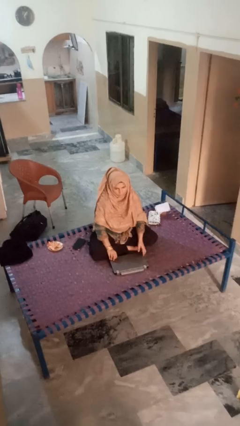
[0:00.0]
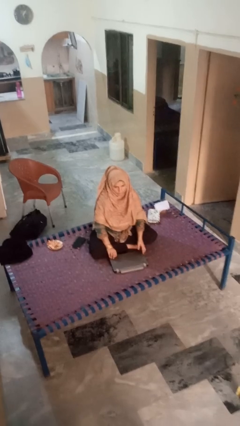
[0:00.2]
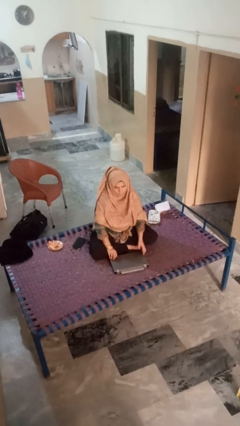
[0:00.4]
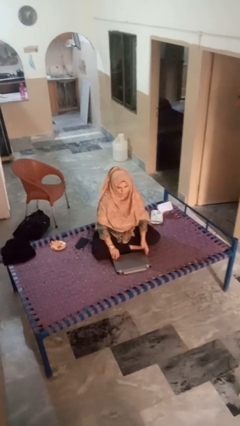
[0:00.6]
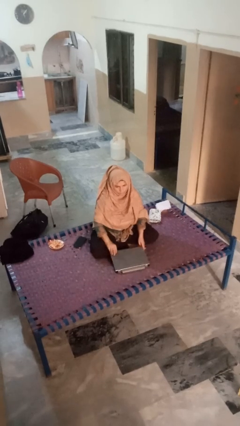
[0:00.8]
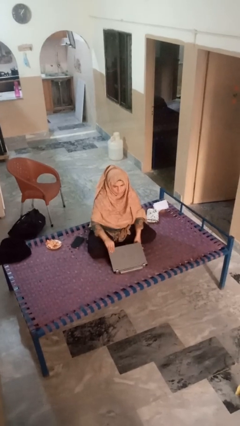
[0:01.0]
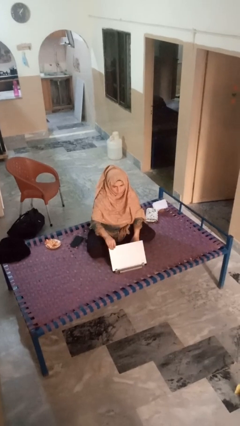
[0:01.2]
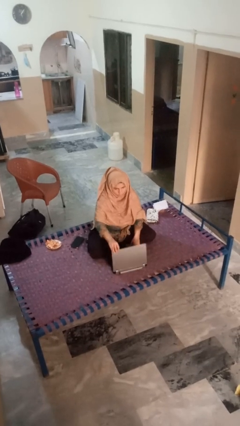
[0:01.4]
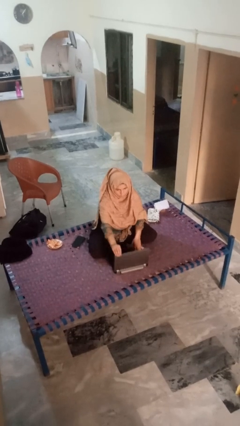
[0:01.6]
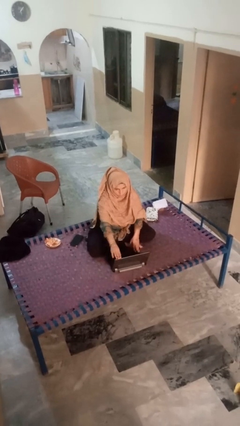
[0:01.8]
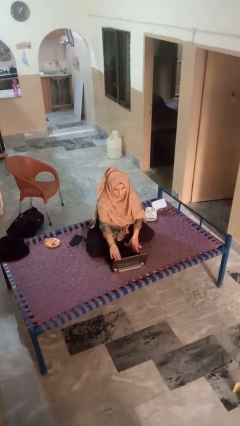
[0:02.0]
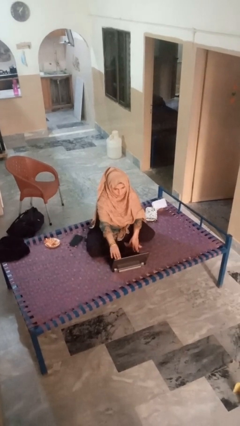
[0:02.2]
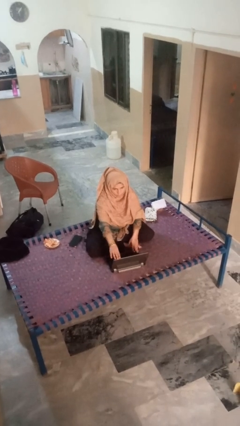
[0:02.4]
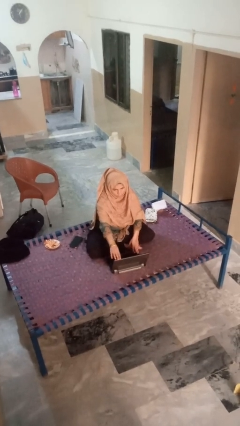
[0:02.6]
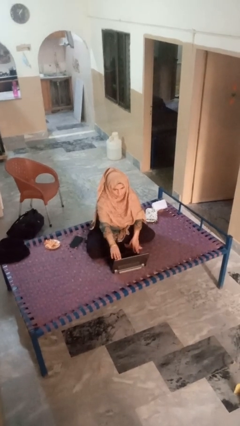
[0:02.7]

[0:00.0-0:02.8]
person opens laptop

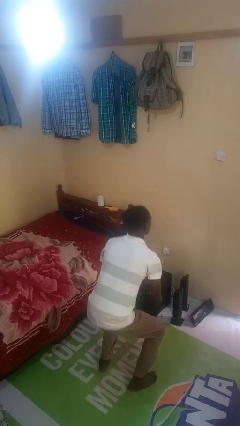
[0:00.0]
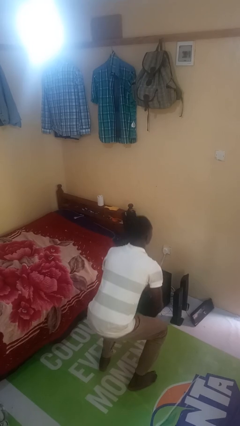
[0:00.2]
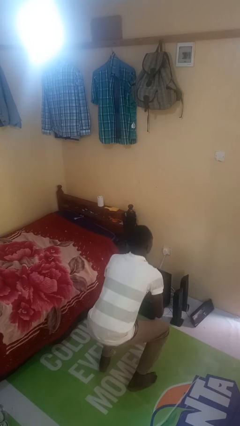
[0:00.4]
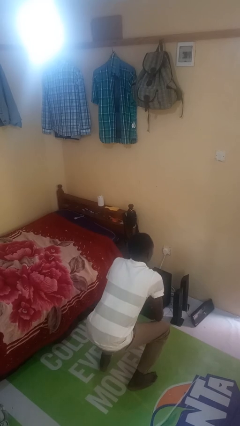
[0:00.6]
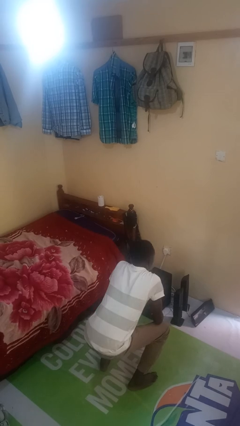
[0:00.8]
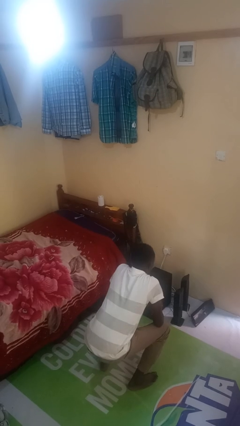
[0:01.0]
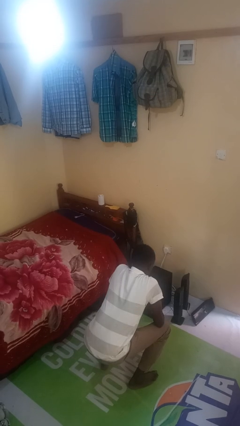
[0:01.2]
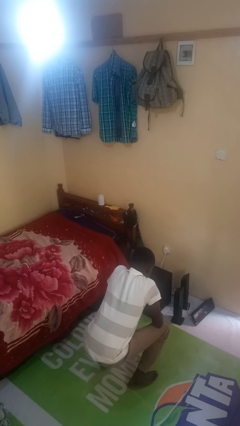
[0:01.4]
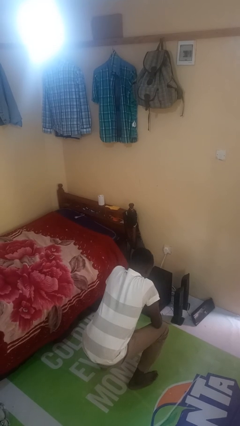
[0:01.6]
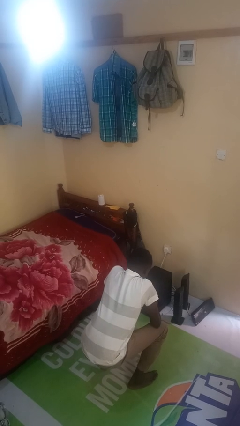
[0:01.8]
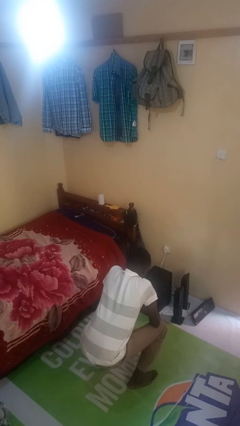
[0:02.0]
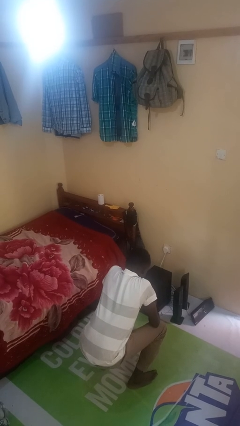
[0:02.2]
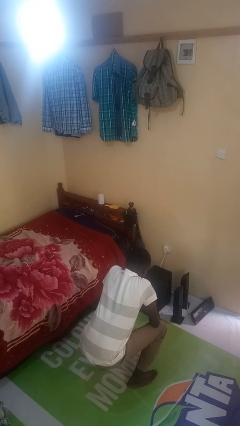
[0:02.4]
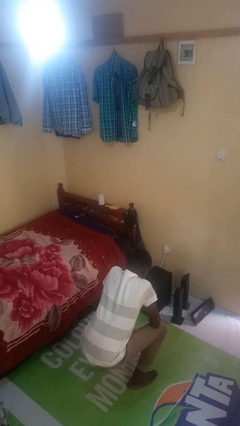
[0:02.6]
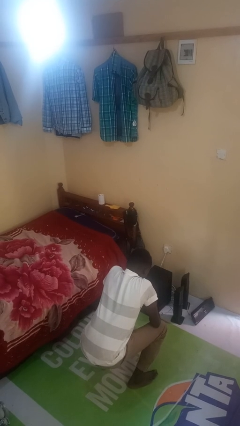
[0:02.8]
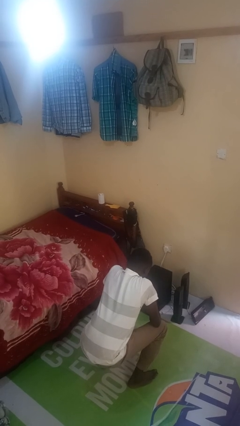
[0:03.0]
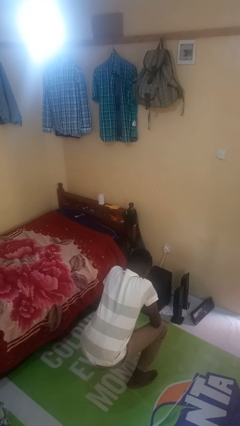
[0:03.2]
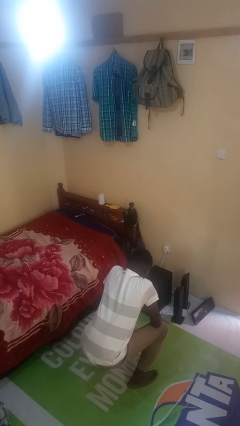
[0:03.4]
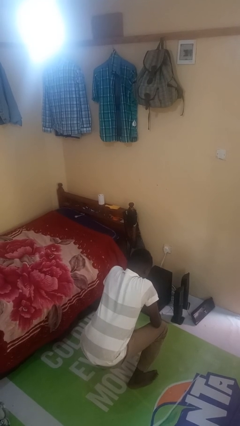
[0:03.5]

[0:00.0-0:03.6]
person squats

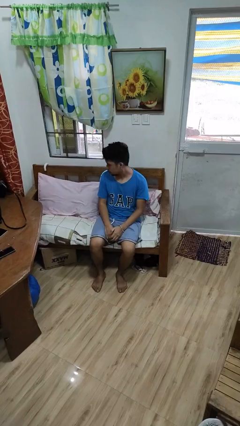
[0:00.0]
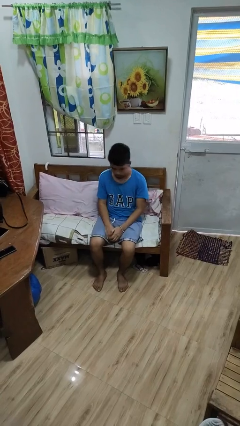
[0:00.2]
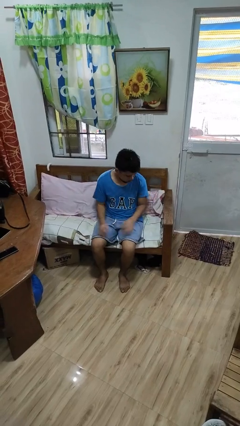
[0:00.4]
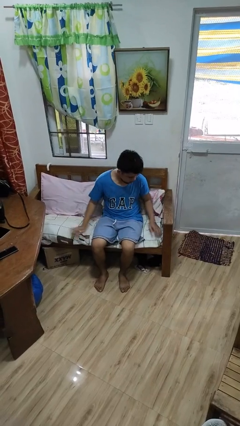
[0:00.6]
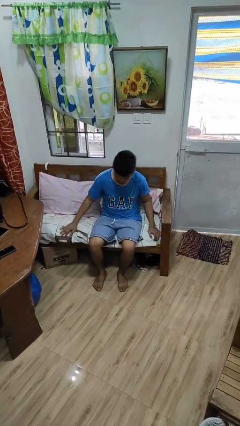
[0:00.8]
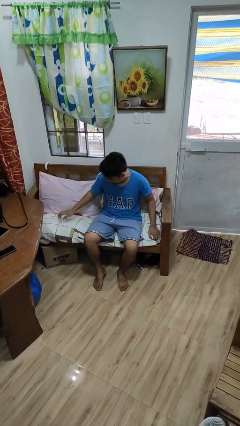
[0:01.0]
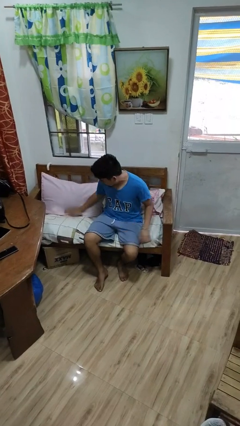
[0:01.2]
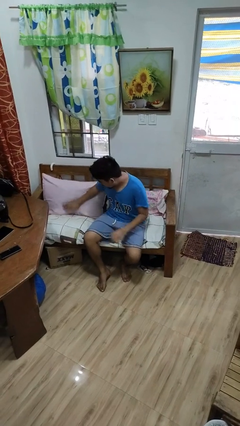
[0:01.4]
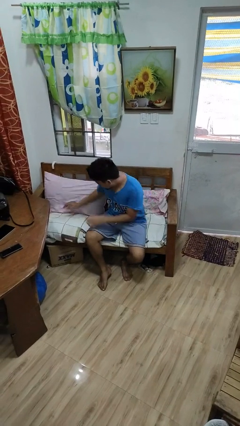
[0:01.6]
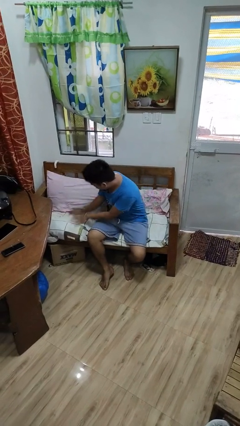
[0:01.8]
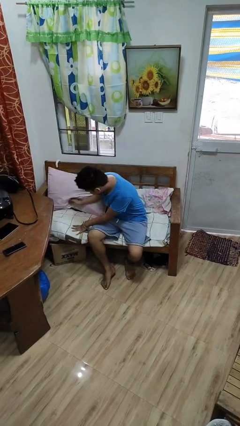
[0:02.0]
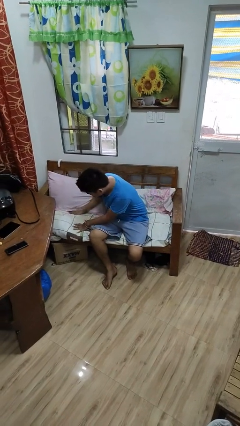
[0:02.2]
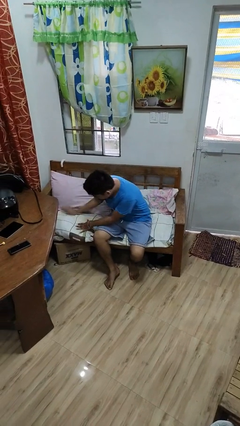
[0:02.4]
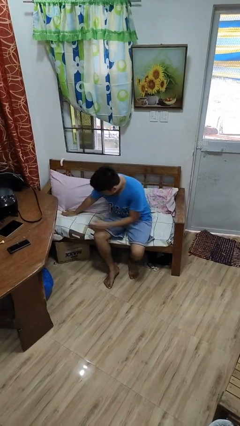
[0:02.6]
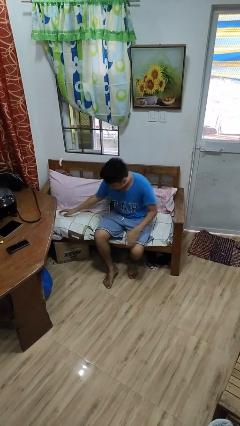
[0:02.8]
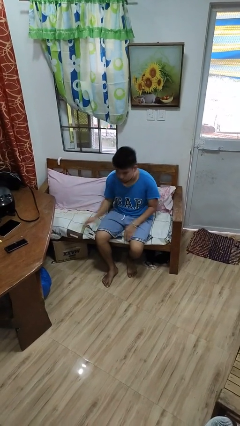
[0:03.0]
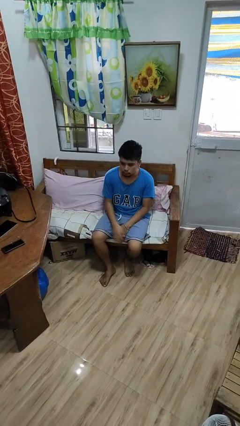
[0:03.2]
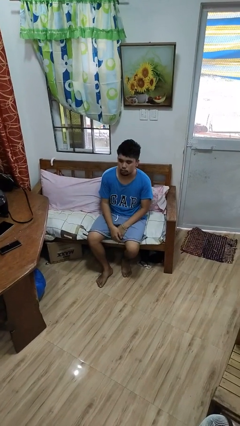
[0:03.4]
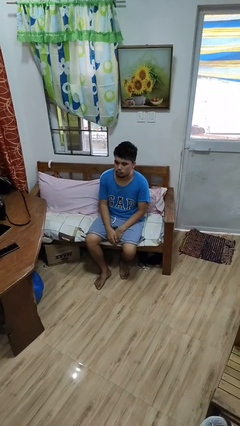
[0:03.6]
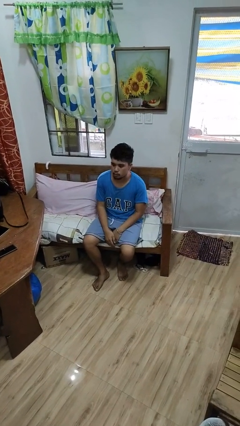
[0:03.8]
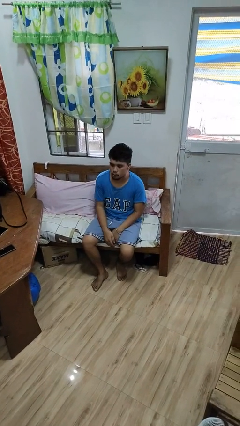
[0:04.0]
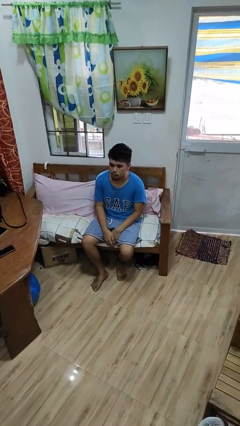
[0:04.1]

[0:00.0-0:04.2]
person searches in couch

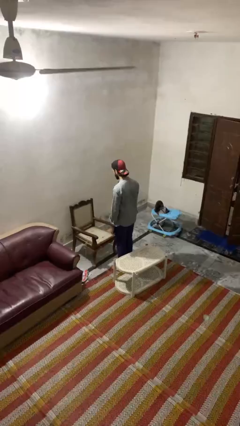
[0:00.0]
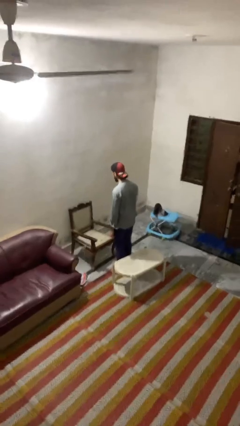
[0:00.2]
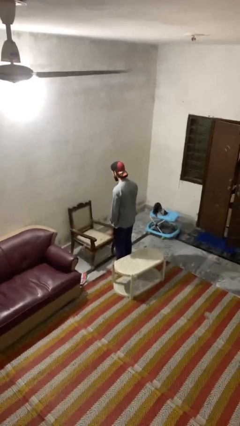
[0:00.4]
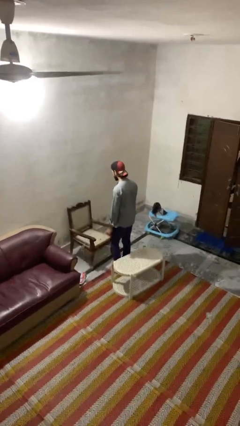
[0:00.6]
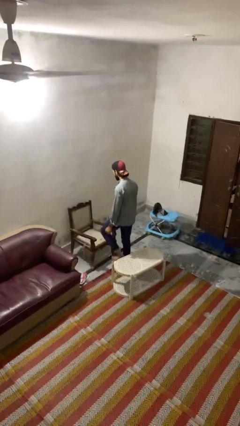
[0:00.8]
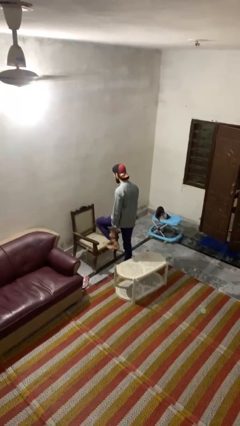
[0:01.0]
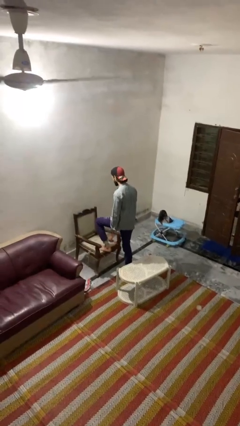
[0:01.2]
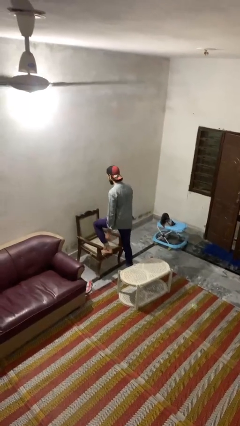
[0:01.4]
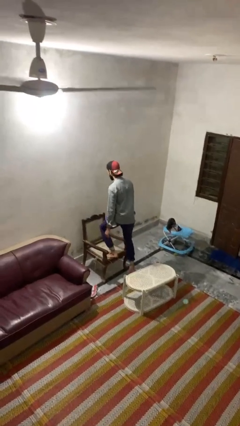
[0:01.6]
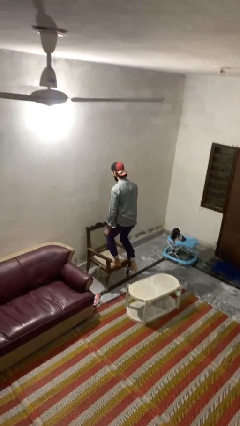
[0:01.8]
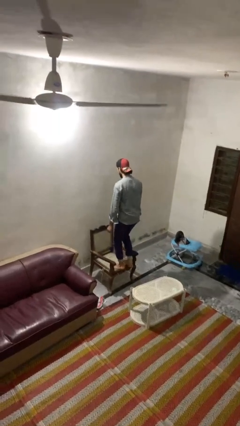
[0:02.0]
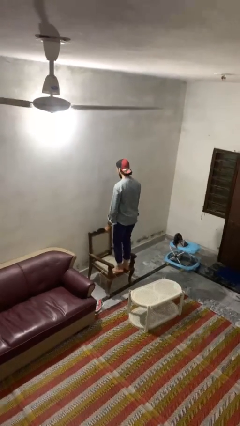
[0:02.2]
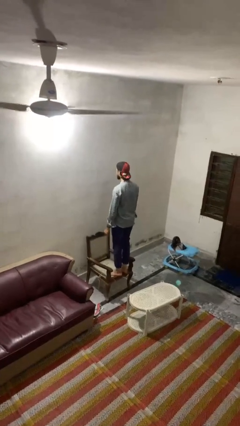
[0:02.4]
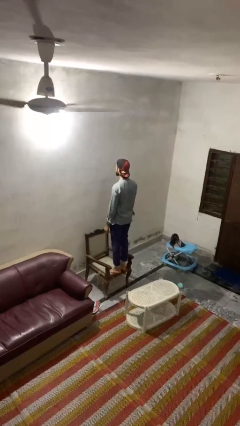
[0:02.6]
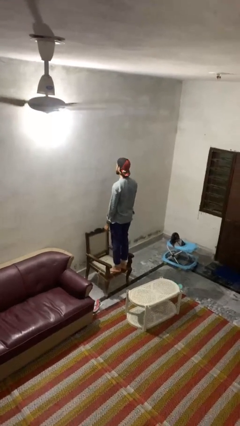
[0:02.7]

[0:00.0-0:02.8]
person climbs on chair

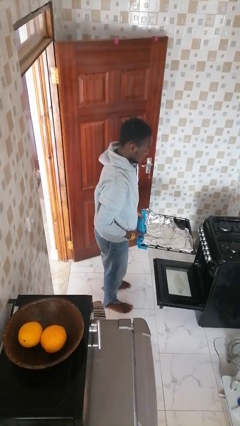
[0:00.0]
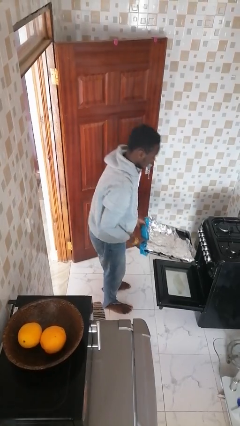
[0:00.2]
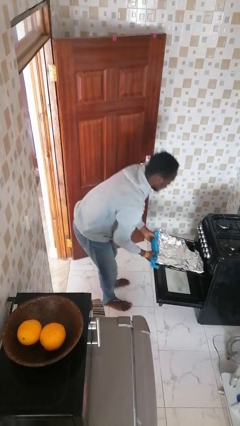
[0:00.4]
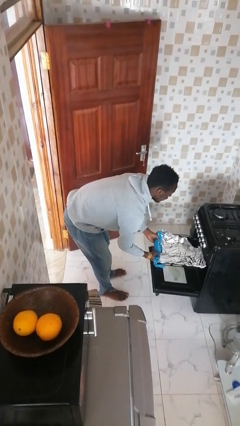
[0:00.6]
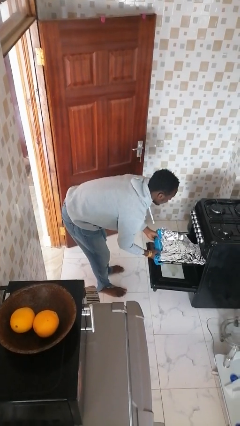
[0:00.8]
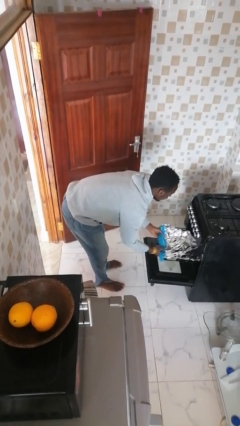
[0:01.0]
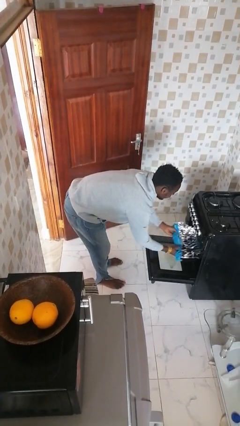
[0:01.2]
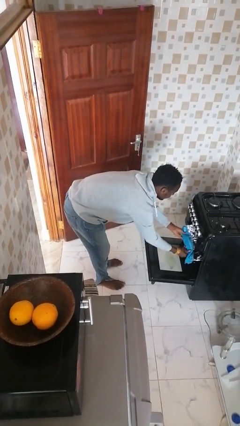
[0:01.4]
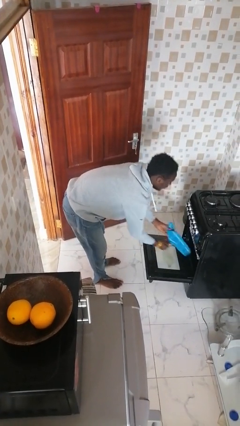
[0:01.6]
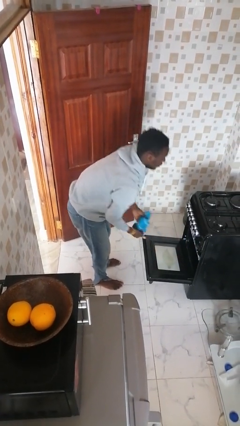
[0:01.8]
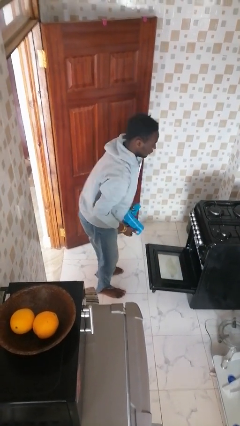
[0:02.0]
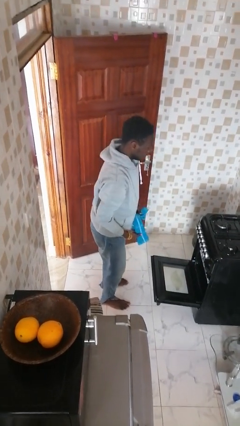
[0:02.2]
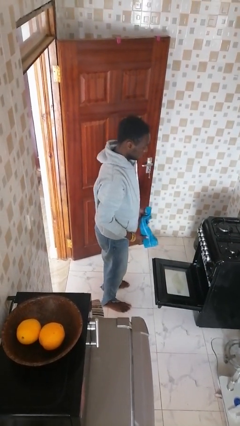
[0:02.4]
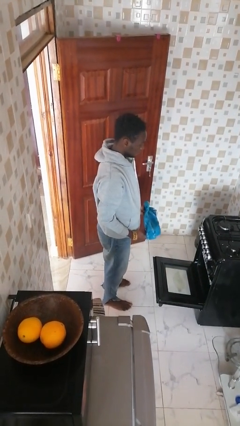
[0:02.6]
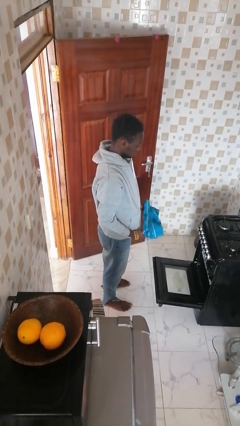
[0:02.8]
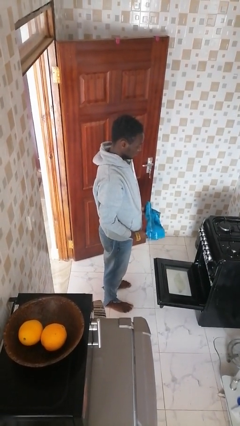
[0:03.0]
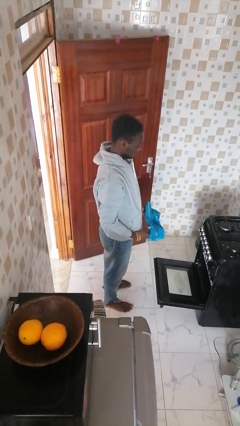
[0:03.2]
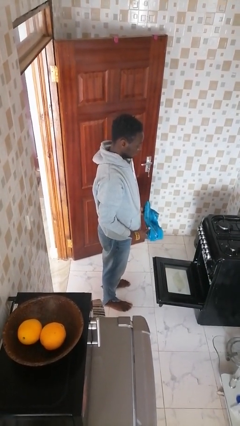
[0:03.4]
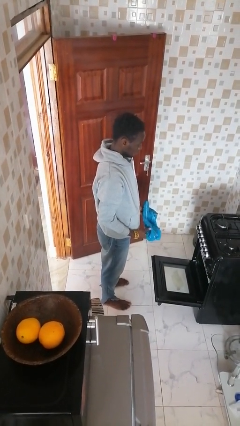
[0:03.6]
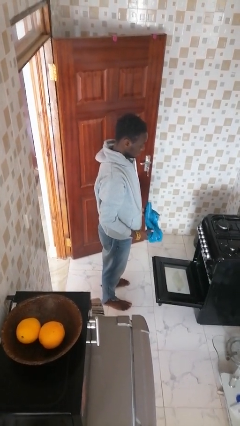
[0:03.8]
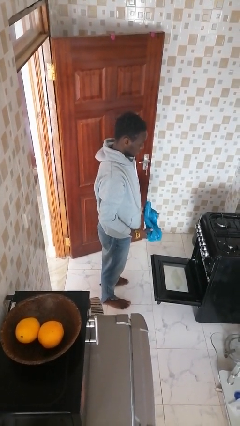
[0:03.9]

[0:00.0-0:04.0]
person puts object into oven

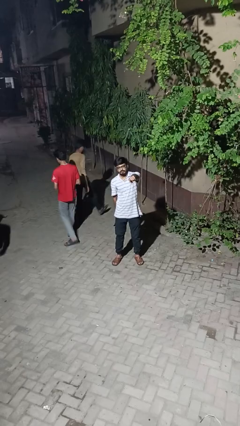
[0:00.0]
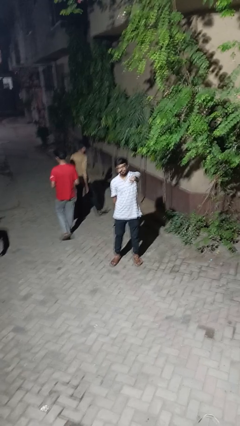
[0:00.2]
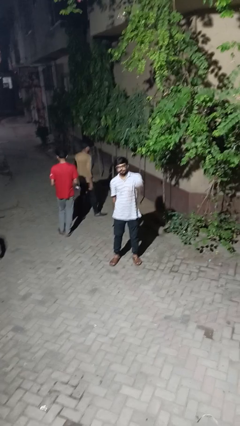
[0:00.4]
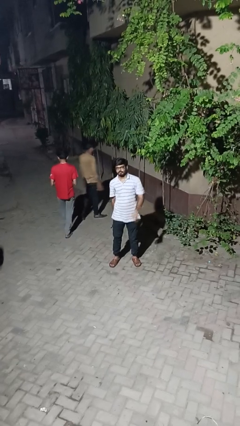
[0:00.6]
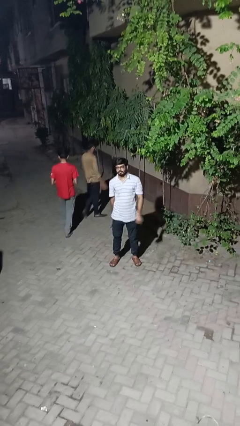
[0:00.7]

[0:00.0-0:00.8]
person points at person
